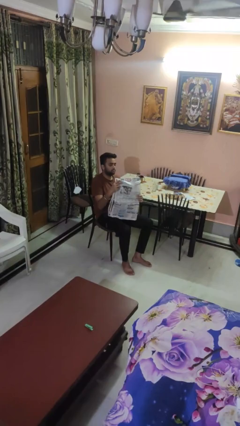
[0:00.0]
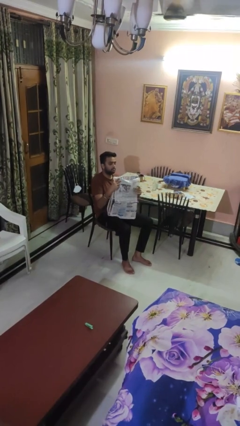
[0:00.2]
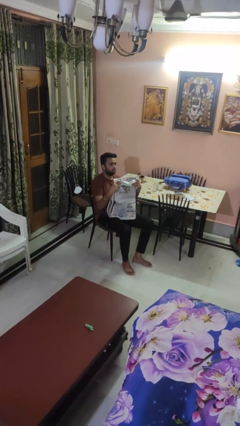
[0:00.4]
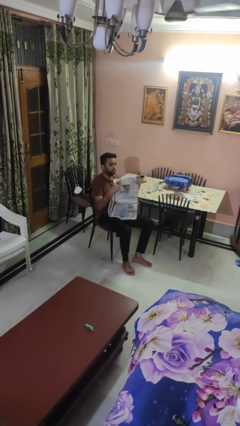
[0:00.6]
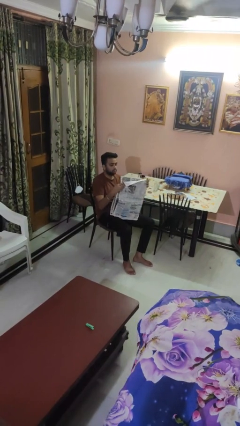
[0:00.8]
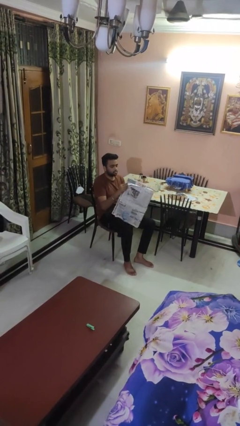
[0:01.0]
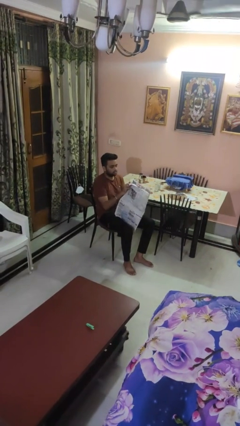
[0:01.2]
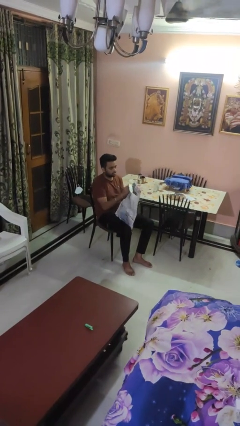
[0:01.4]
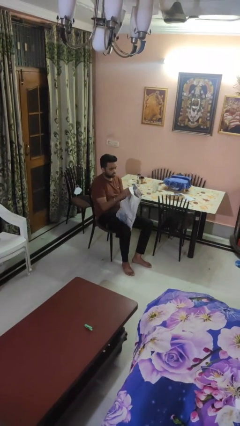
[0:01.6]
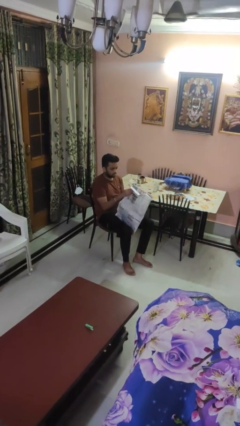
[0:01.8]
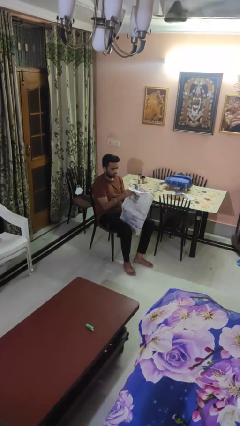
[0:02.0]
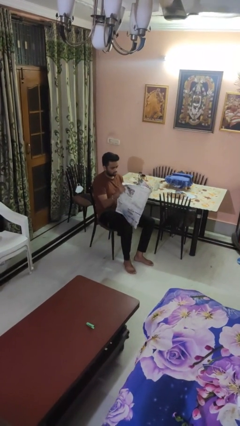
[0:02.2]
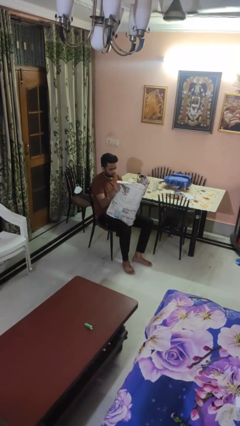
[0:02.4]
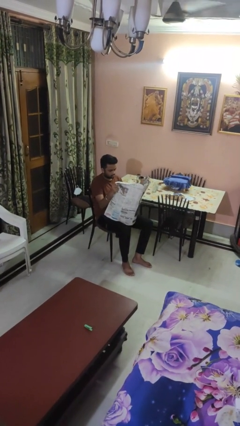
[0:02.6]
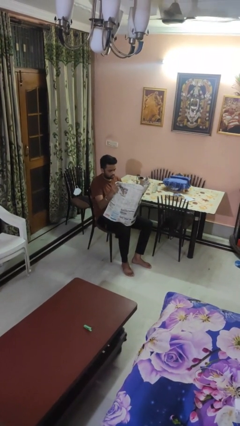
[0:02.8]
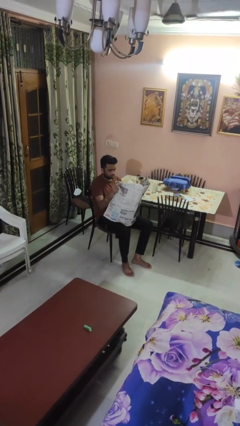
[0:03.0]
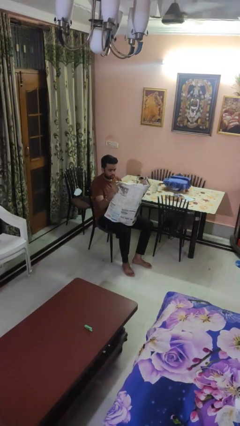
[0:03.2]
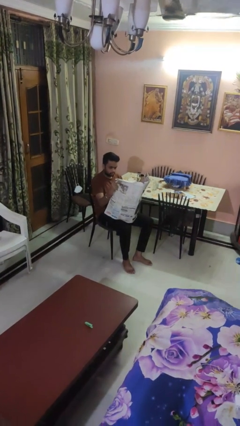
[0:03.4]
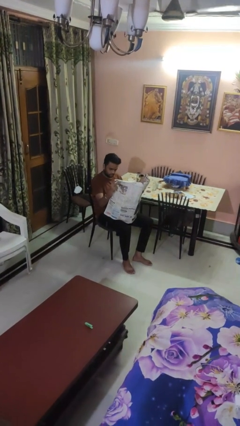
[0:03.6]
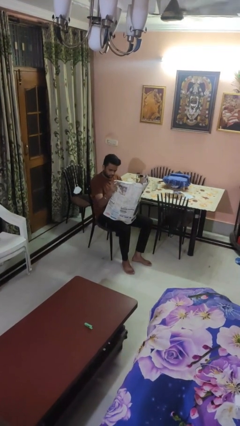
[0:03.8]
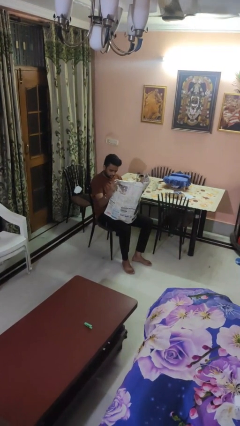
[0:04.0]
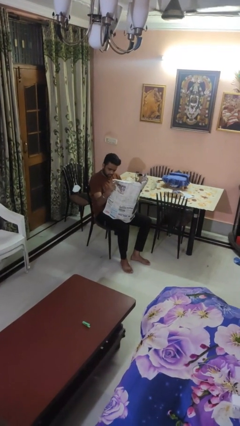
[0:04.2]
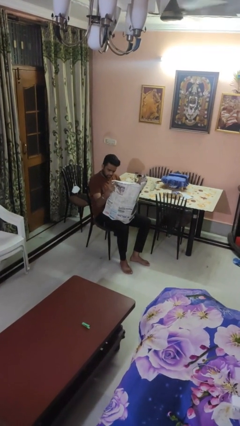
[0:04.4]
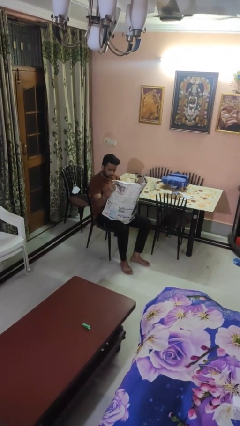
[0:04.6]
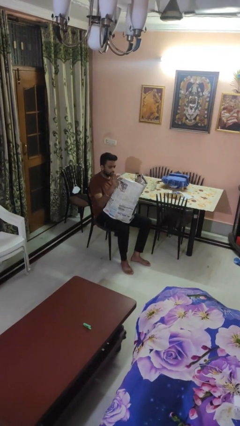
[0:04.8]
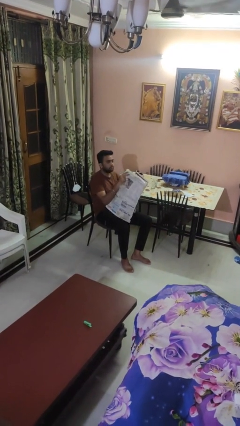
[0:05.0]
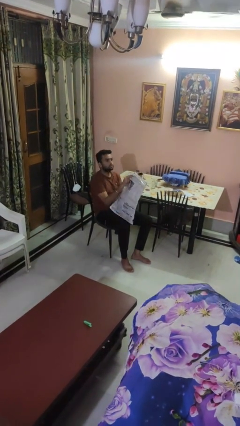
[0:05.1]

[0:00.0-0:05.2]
person reads newspaper

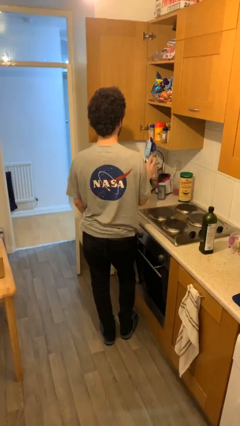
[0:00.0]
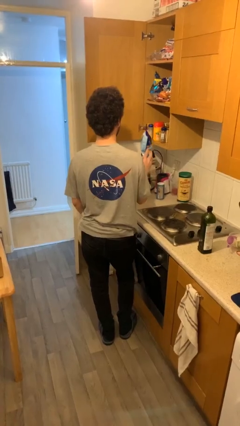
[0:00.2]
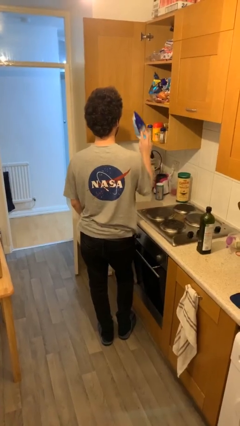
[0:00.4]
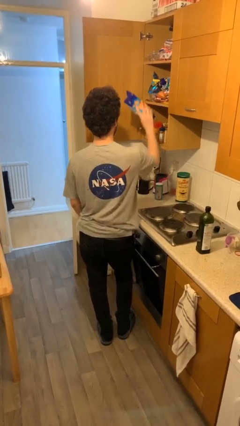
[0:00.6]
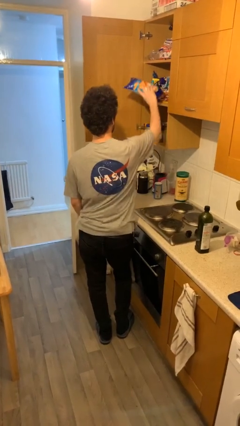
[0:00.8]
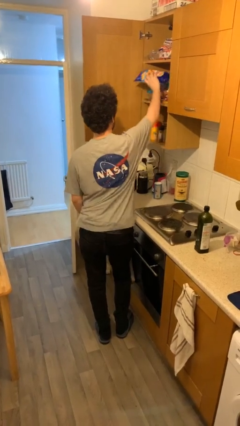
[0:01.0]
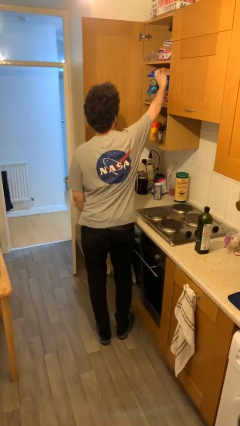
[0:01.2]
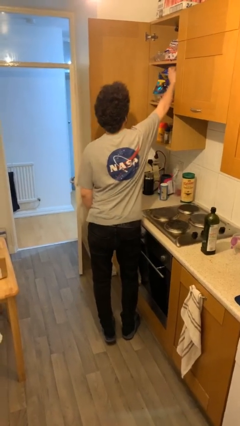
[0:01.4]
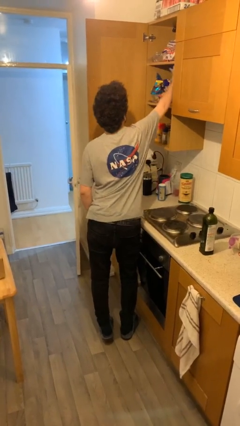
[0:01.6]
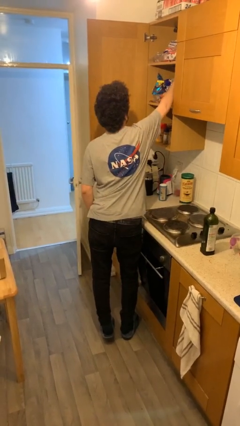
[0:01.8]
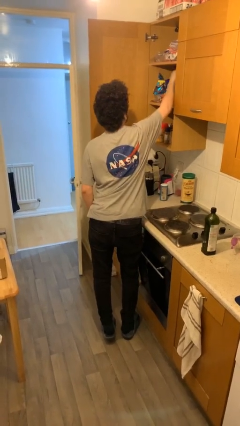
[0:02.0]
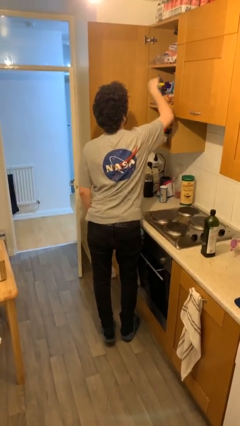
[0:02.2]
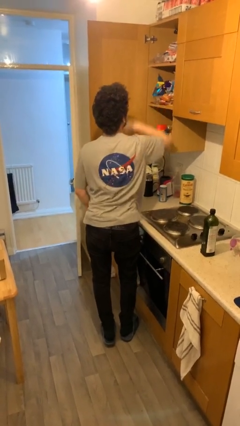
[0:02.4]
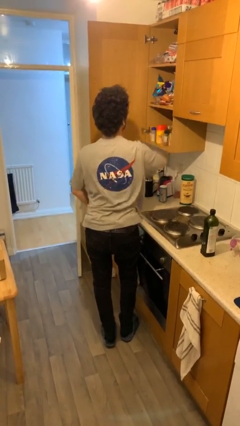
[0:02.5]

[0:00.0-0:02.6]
person puts down object on shelf

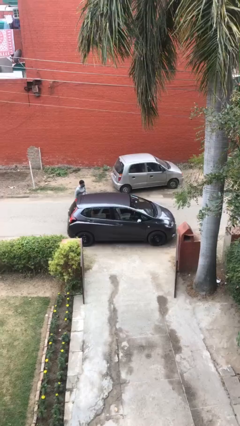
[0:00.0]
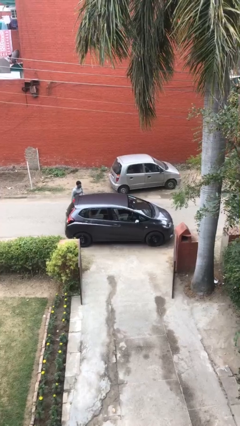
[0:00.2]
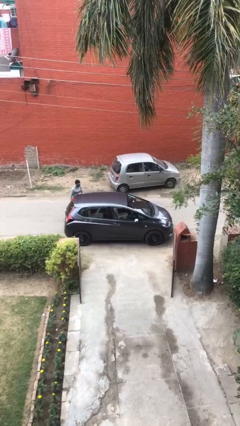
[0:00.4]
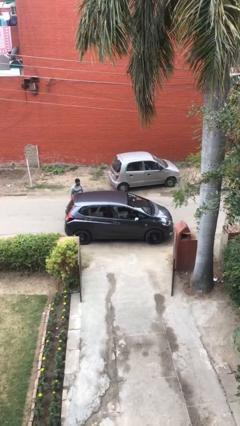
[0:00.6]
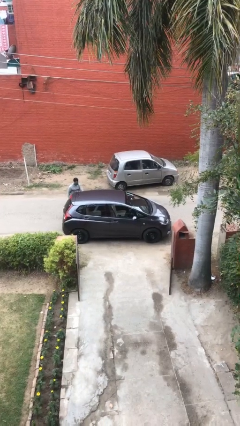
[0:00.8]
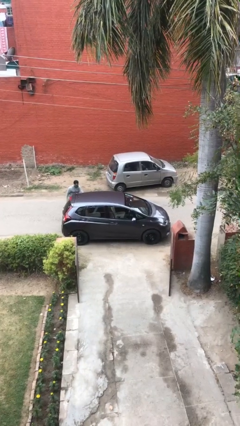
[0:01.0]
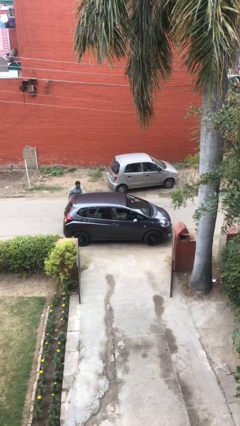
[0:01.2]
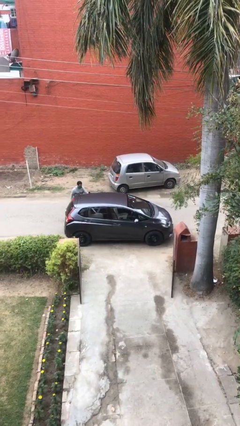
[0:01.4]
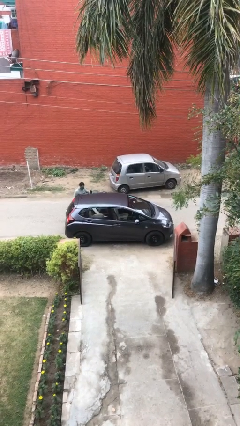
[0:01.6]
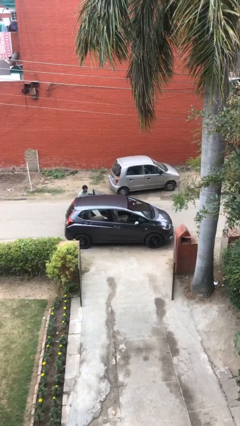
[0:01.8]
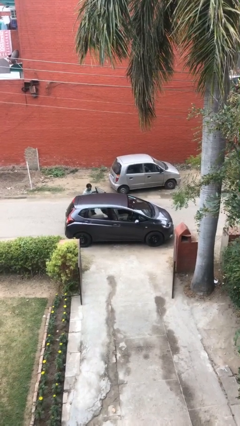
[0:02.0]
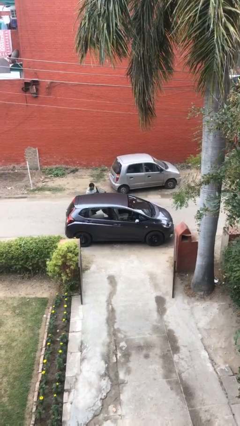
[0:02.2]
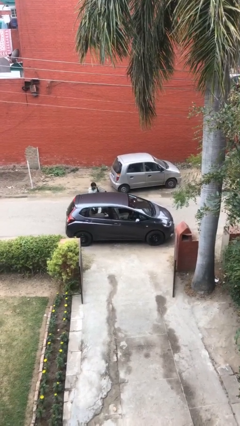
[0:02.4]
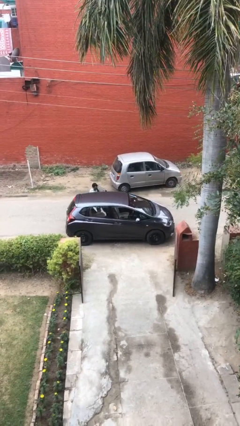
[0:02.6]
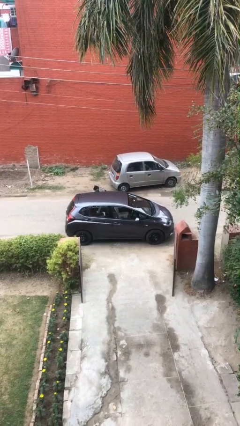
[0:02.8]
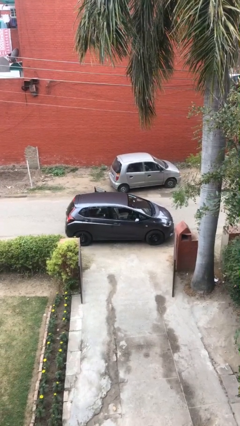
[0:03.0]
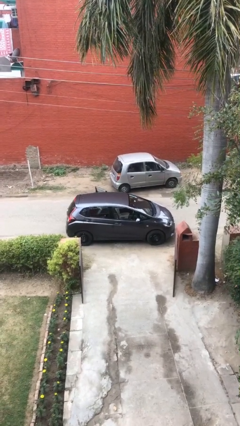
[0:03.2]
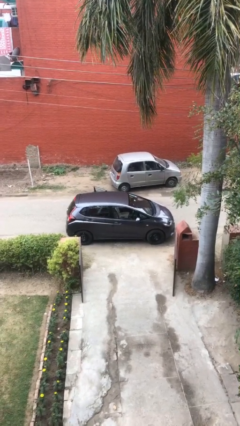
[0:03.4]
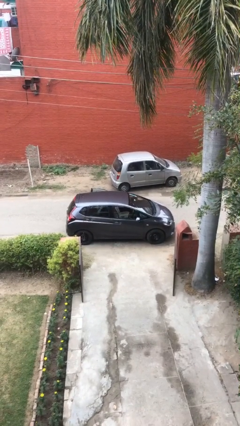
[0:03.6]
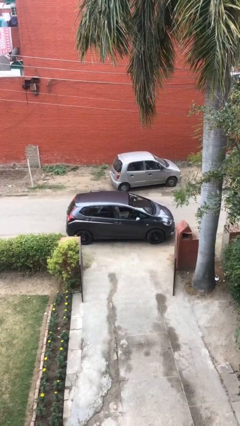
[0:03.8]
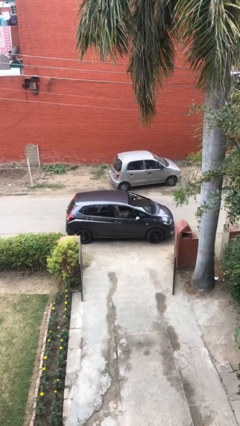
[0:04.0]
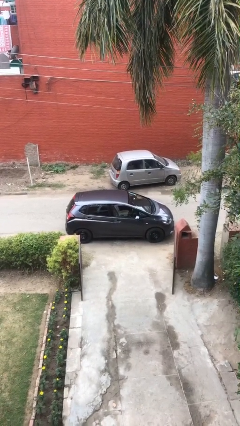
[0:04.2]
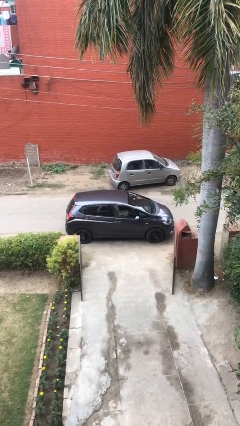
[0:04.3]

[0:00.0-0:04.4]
car picks up person

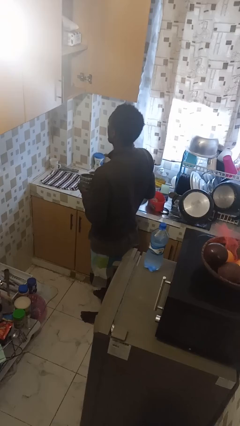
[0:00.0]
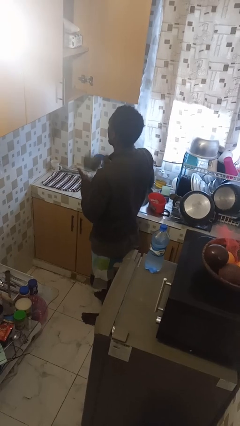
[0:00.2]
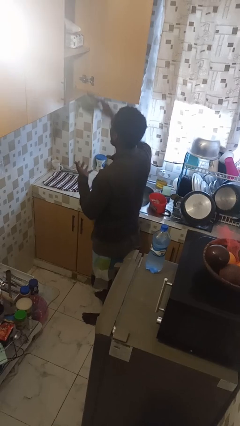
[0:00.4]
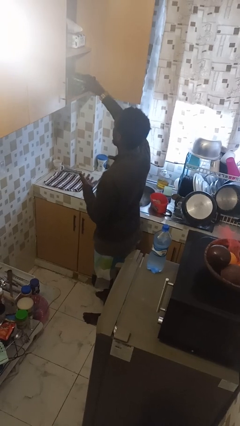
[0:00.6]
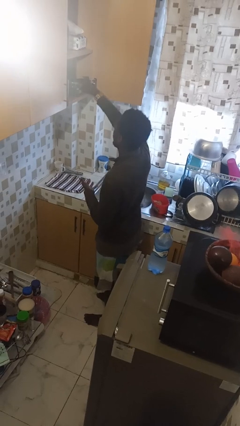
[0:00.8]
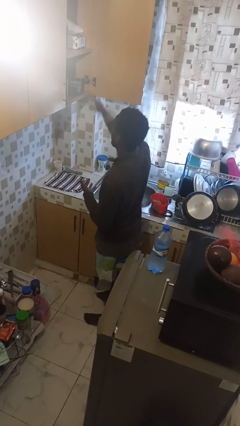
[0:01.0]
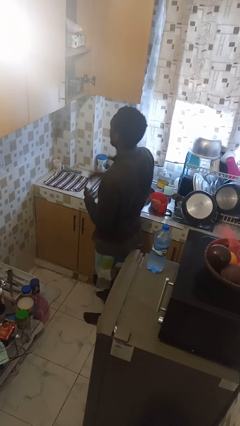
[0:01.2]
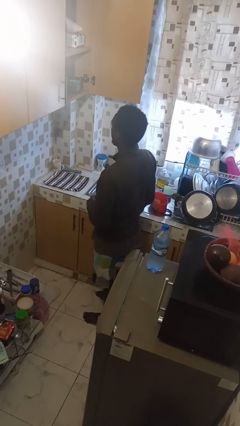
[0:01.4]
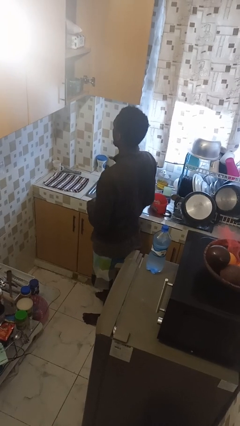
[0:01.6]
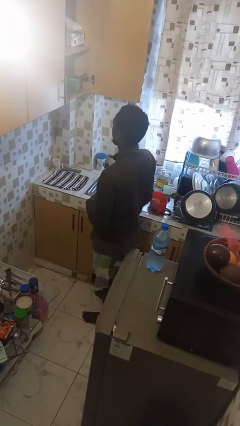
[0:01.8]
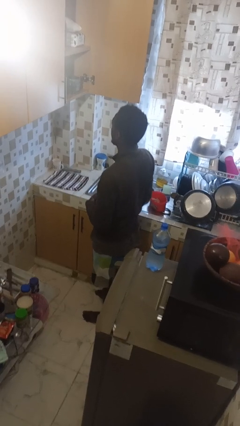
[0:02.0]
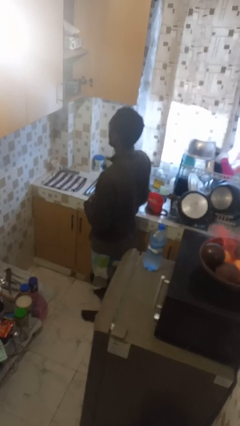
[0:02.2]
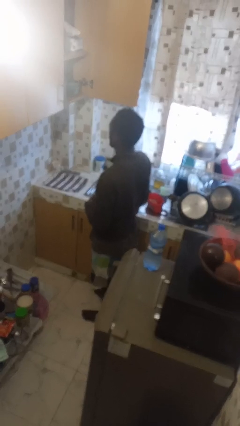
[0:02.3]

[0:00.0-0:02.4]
person puts down object into cabinet

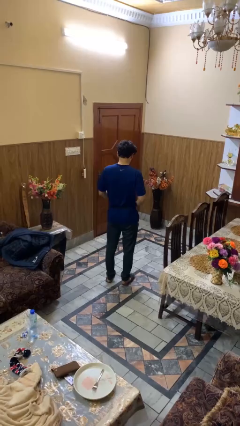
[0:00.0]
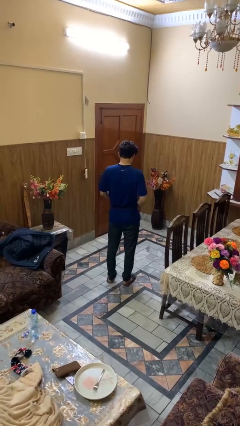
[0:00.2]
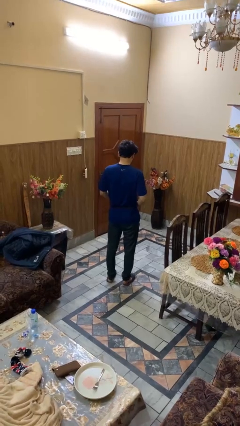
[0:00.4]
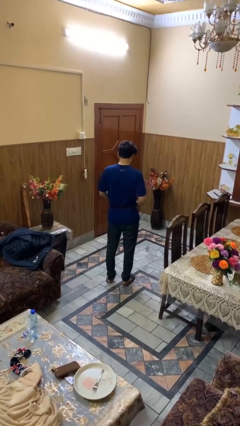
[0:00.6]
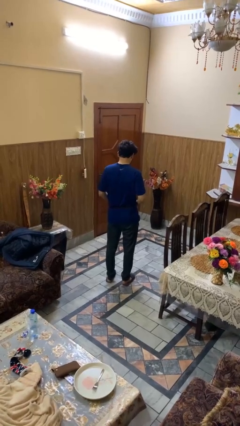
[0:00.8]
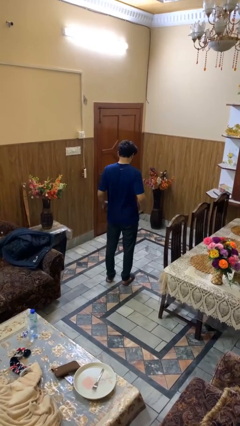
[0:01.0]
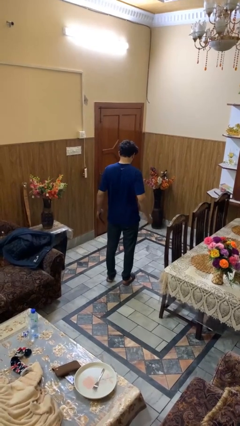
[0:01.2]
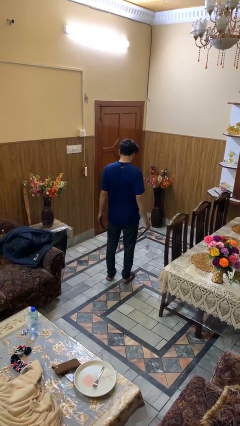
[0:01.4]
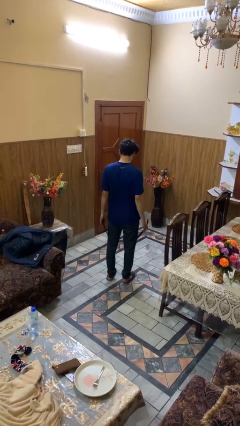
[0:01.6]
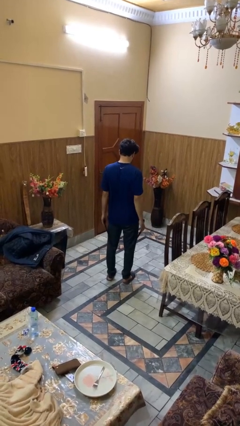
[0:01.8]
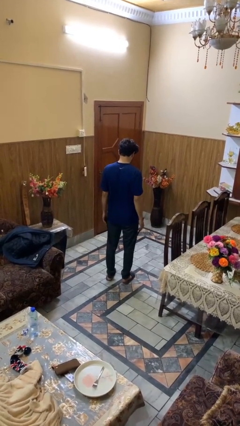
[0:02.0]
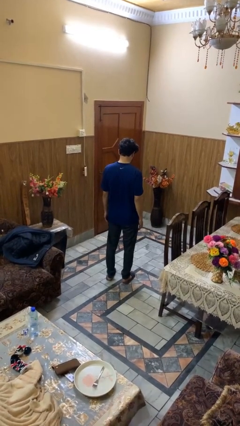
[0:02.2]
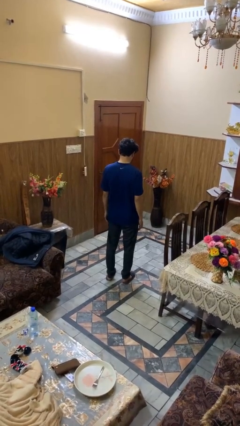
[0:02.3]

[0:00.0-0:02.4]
person takes off belt
